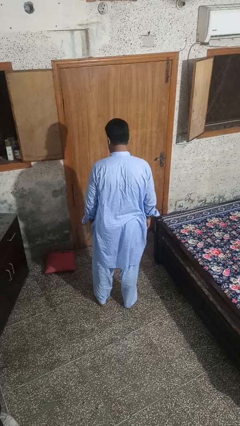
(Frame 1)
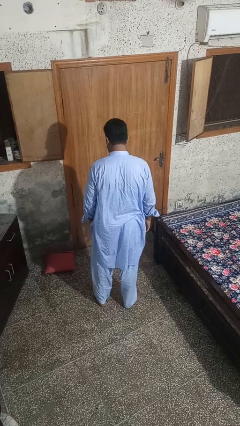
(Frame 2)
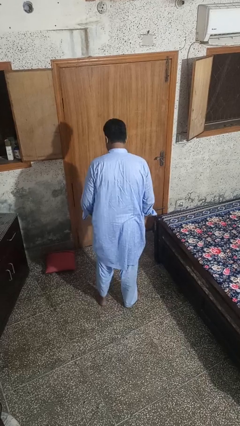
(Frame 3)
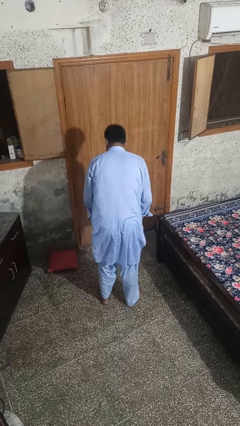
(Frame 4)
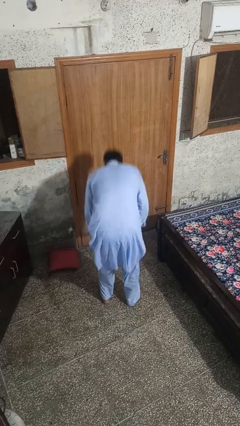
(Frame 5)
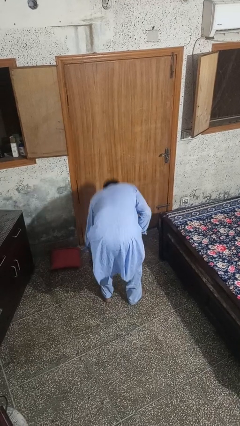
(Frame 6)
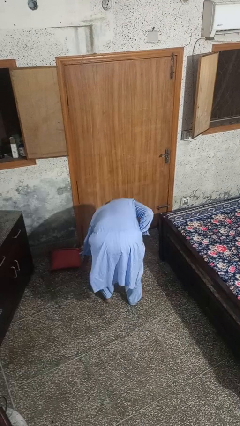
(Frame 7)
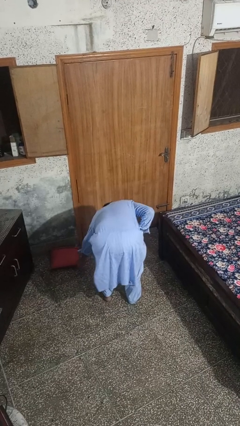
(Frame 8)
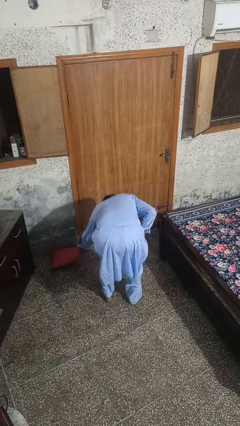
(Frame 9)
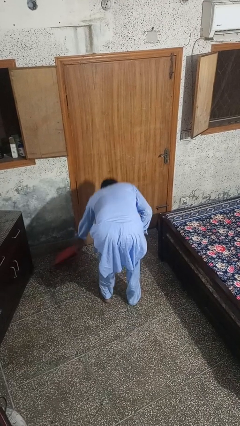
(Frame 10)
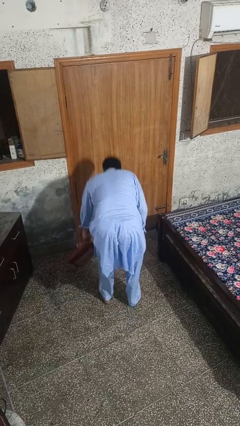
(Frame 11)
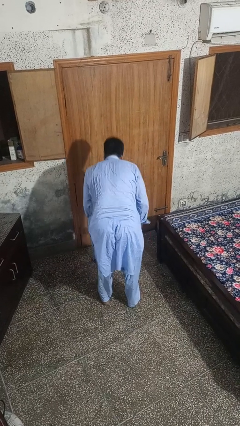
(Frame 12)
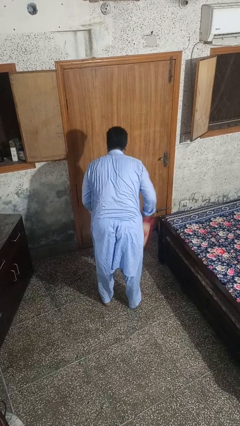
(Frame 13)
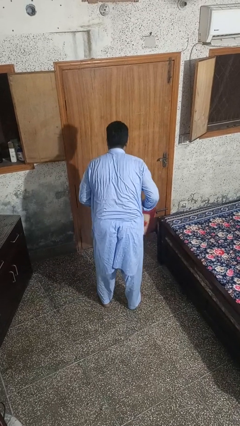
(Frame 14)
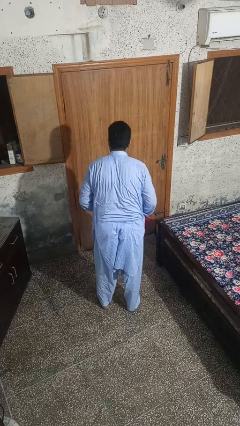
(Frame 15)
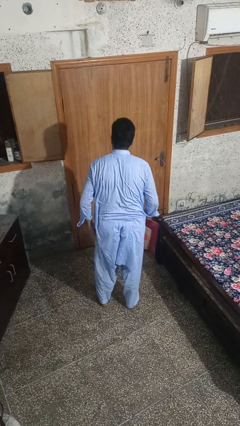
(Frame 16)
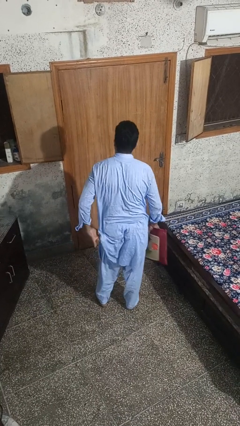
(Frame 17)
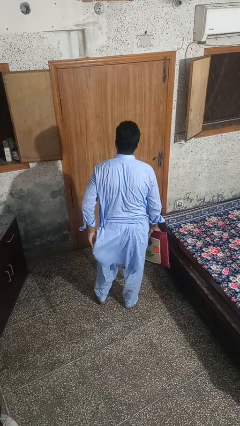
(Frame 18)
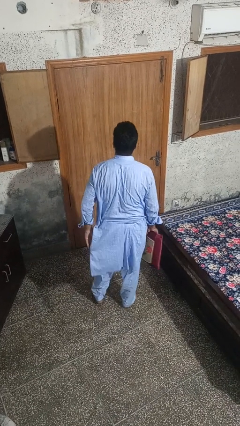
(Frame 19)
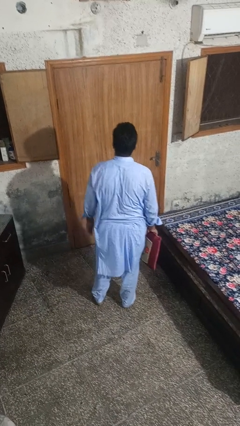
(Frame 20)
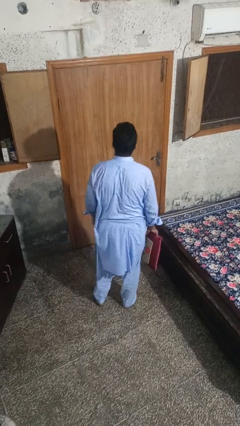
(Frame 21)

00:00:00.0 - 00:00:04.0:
person picks up object from floor

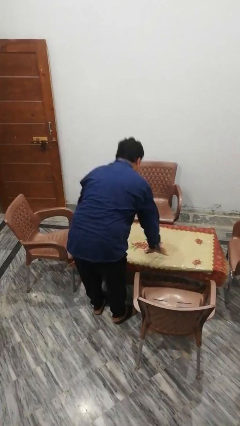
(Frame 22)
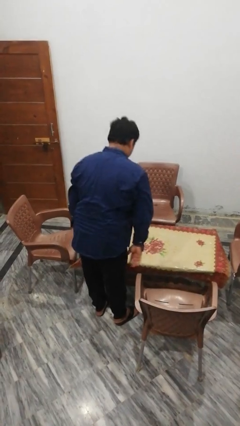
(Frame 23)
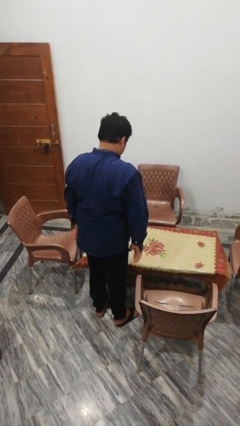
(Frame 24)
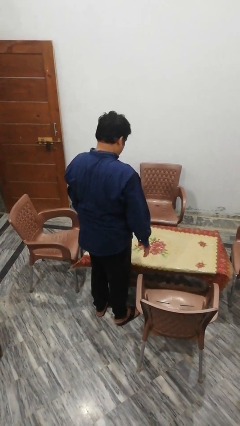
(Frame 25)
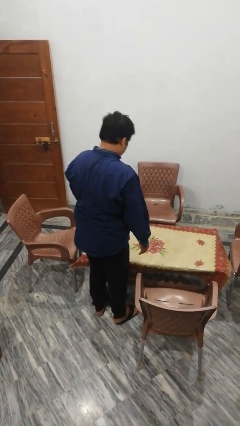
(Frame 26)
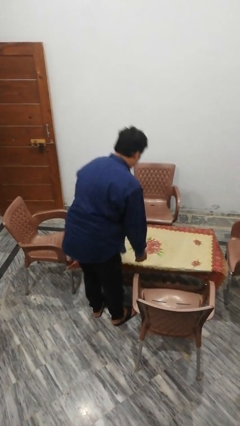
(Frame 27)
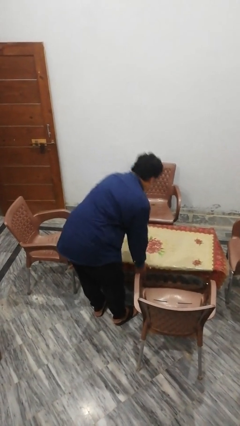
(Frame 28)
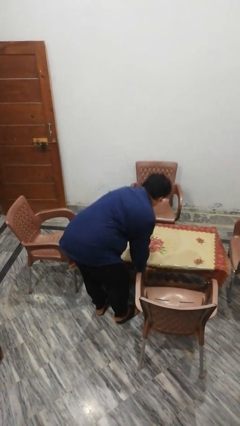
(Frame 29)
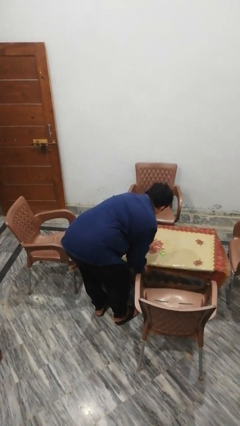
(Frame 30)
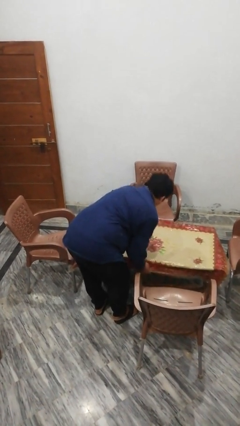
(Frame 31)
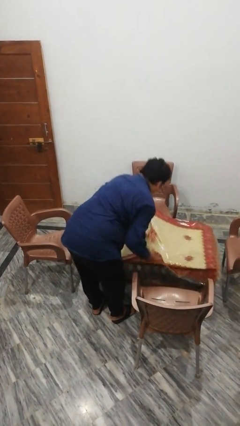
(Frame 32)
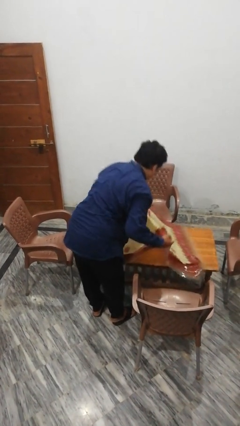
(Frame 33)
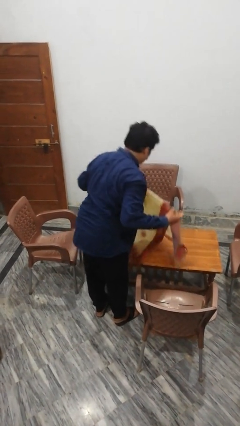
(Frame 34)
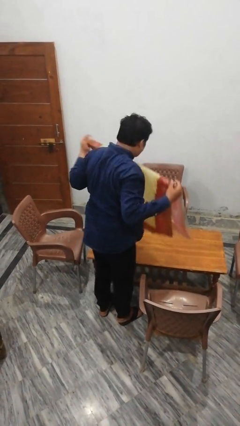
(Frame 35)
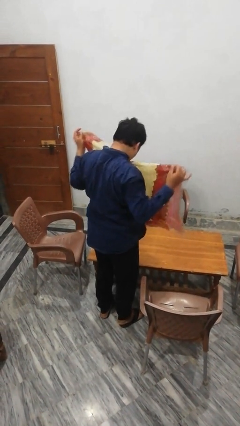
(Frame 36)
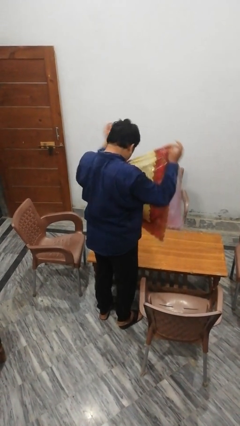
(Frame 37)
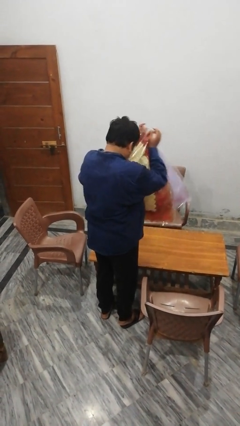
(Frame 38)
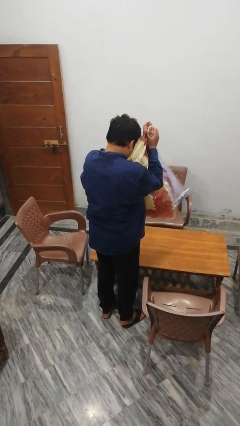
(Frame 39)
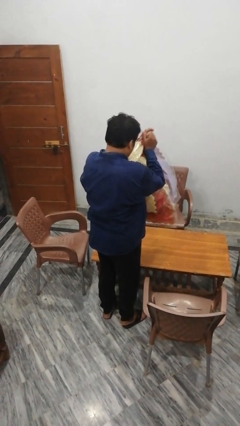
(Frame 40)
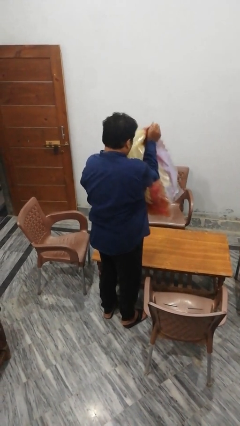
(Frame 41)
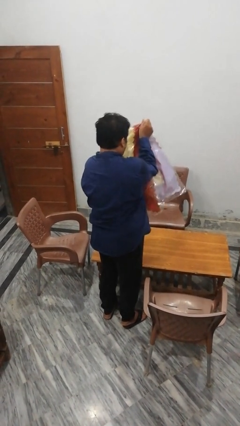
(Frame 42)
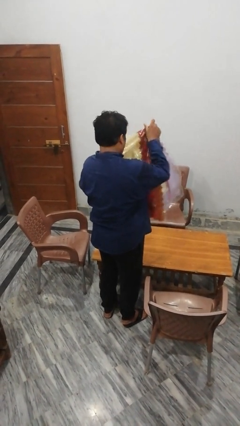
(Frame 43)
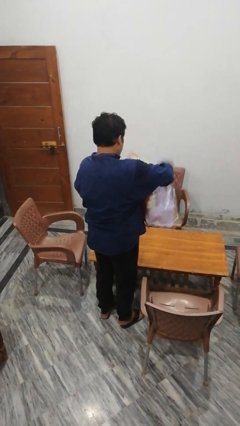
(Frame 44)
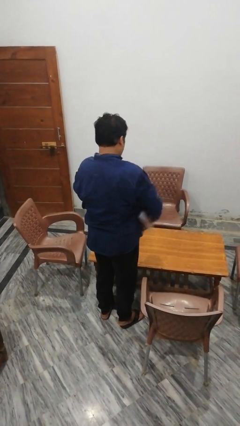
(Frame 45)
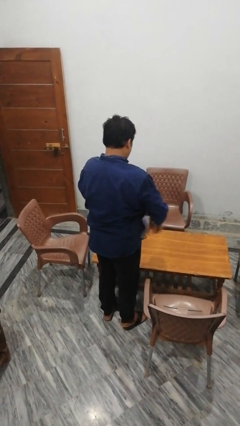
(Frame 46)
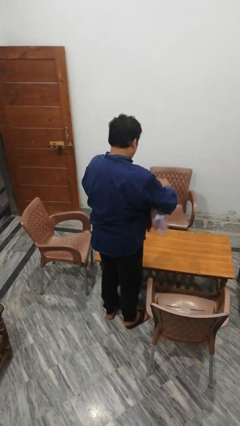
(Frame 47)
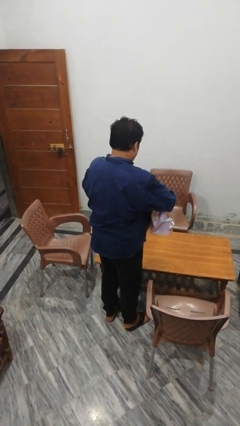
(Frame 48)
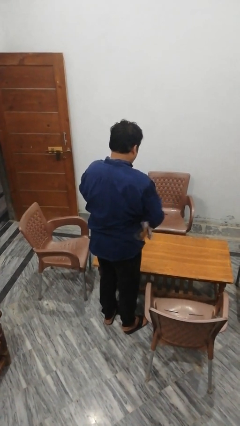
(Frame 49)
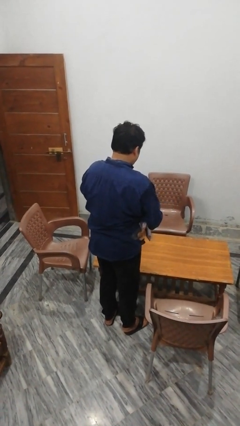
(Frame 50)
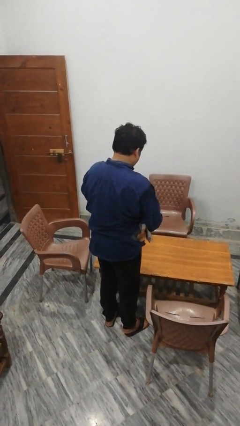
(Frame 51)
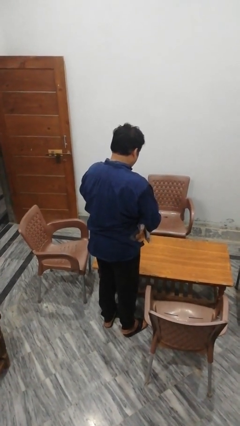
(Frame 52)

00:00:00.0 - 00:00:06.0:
person folds tablecloth

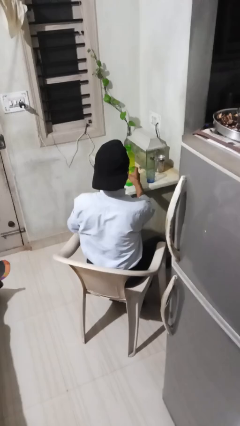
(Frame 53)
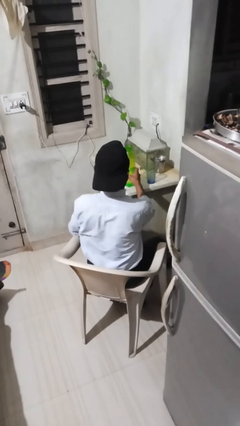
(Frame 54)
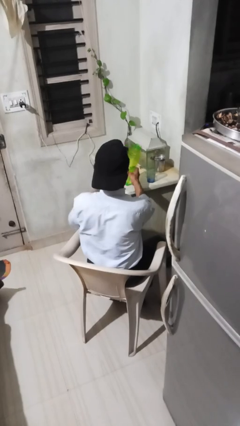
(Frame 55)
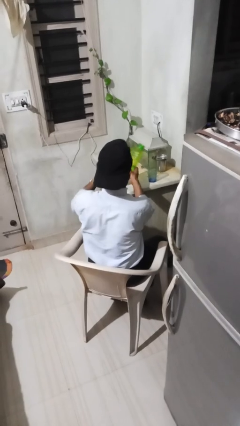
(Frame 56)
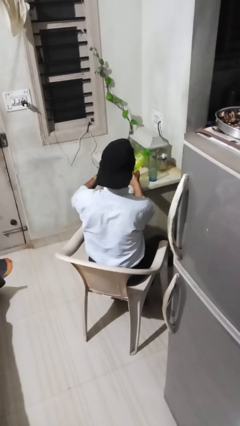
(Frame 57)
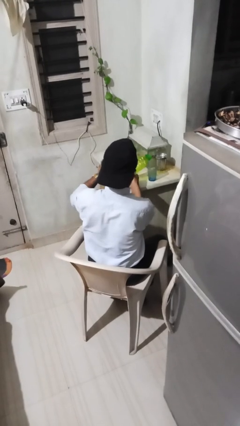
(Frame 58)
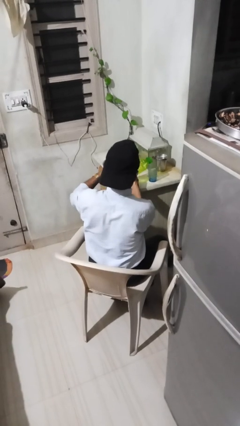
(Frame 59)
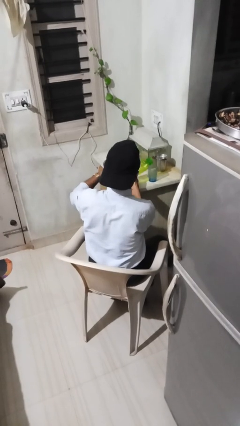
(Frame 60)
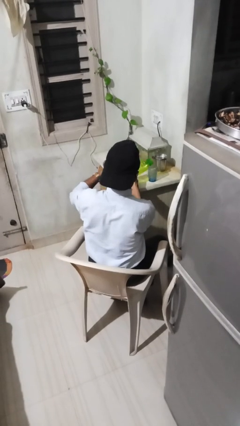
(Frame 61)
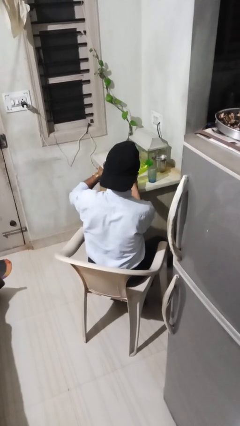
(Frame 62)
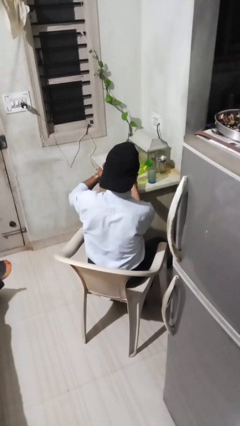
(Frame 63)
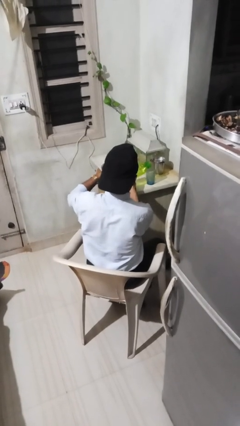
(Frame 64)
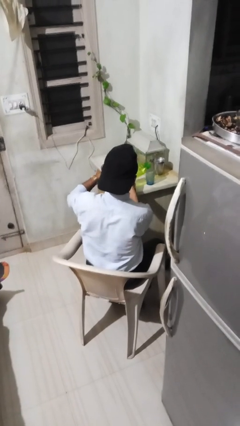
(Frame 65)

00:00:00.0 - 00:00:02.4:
person pours liquid into cup

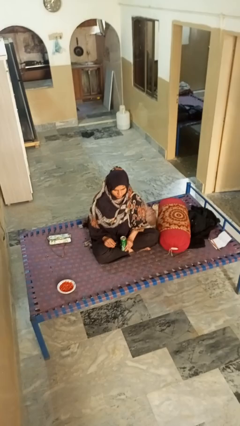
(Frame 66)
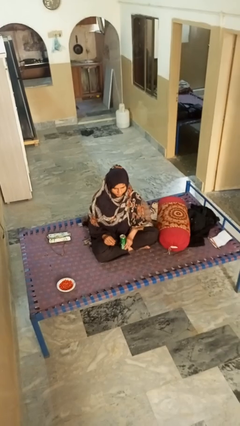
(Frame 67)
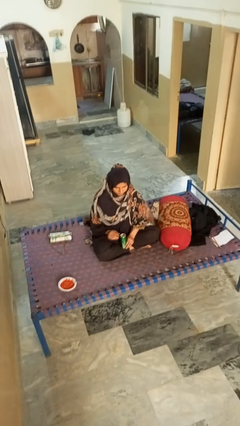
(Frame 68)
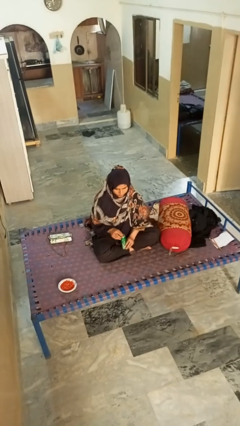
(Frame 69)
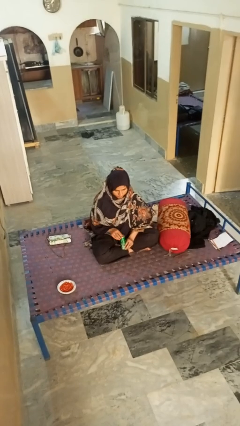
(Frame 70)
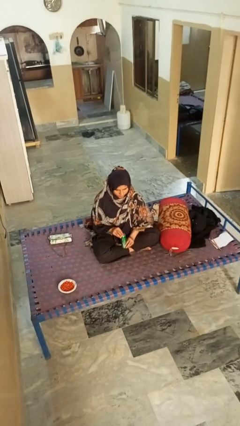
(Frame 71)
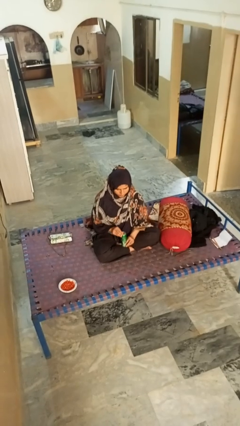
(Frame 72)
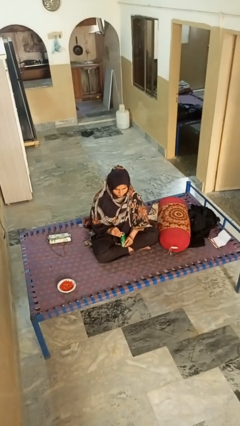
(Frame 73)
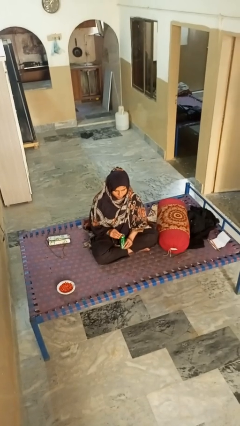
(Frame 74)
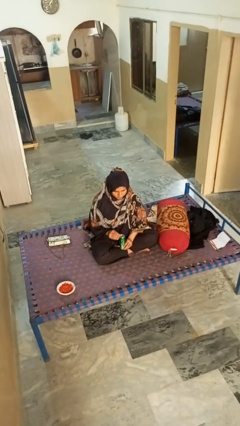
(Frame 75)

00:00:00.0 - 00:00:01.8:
person opens can with can opener

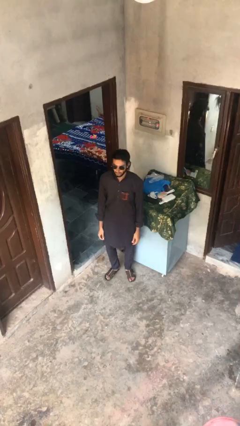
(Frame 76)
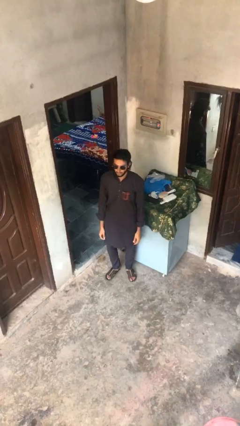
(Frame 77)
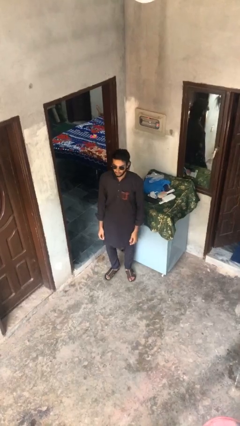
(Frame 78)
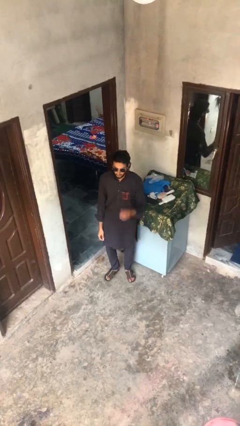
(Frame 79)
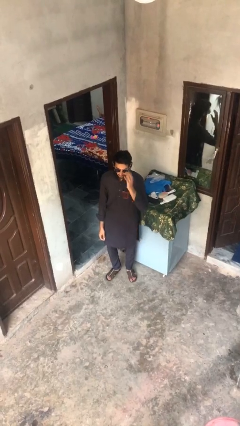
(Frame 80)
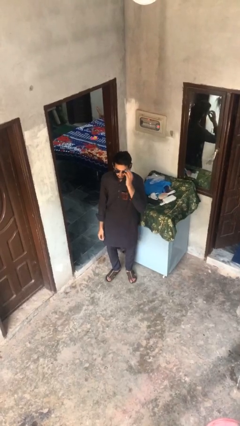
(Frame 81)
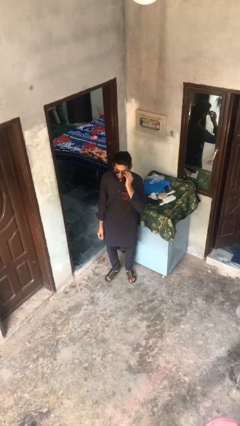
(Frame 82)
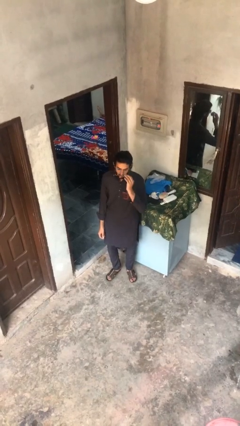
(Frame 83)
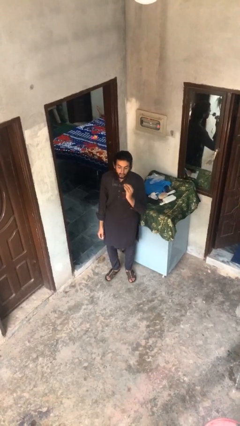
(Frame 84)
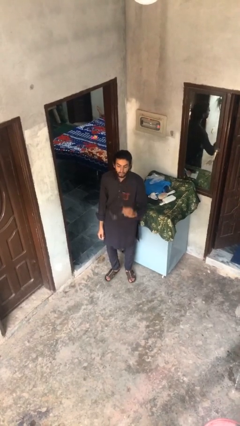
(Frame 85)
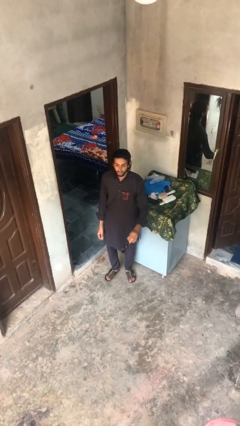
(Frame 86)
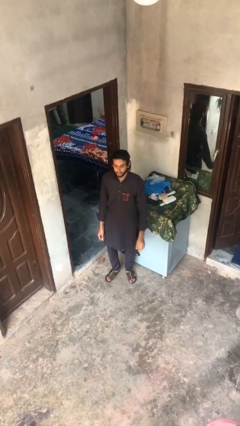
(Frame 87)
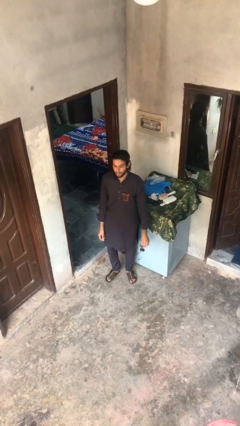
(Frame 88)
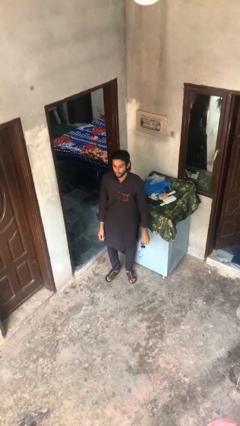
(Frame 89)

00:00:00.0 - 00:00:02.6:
person takes off sunglasses

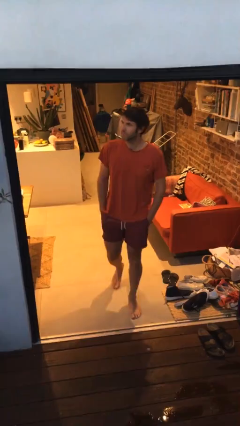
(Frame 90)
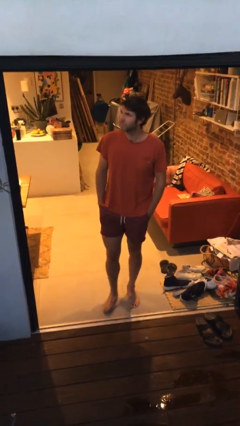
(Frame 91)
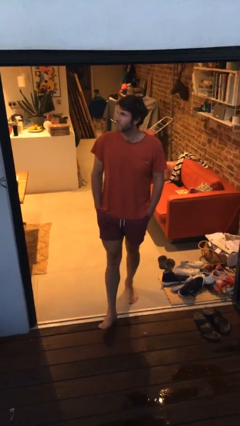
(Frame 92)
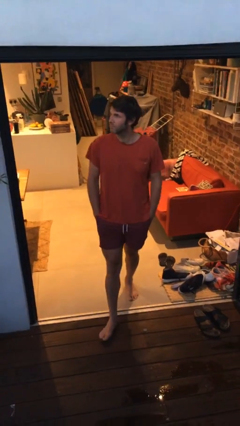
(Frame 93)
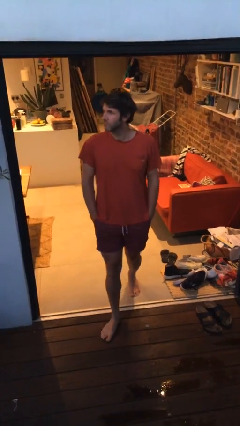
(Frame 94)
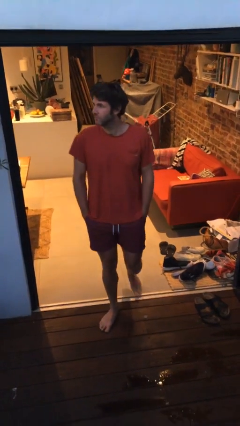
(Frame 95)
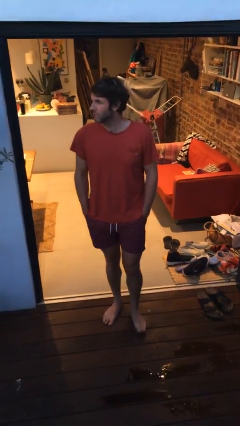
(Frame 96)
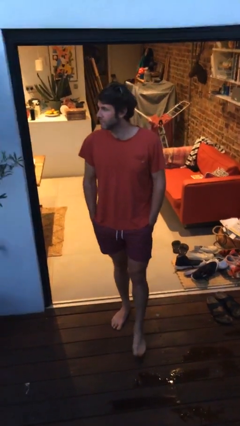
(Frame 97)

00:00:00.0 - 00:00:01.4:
person enters scene through structure
